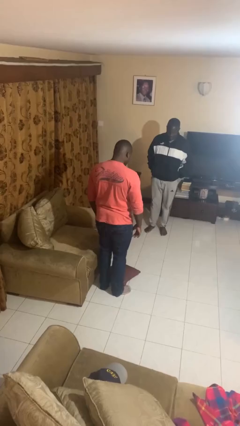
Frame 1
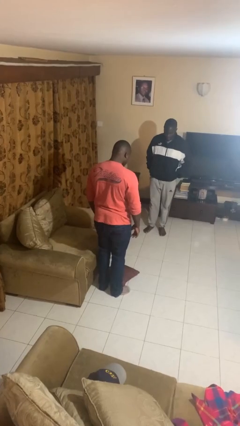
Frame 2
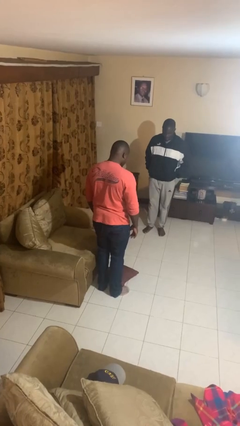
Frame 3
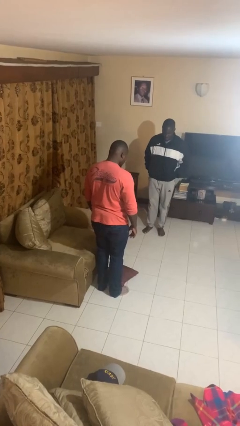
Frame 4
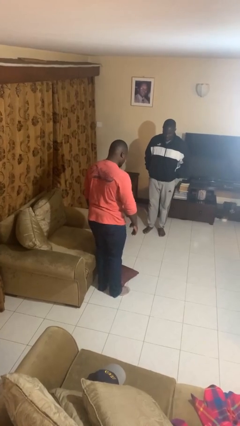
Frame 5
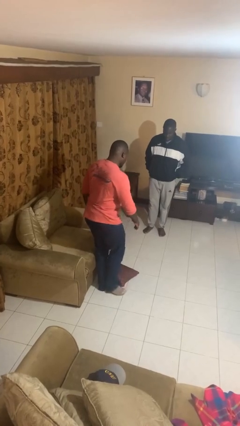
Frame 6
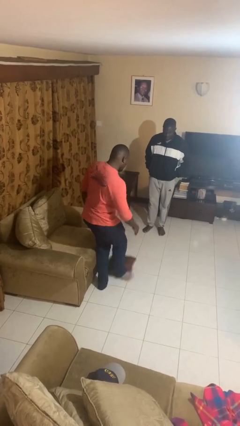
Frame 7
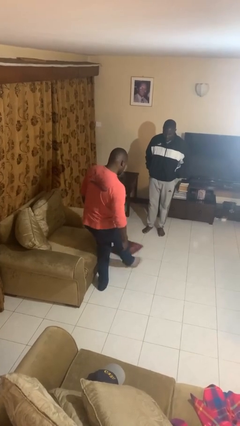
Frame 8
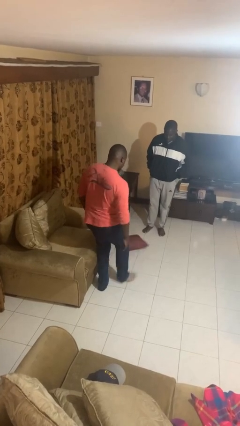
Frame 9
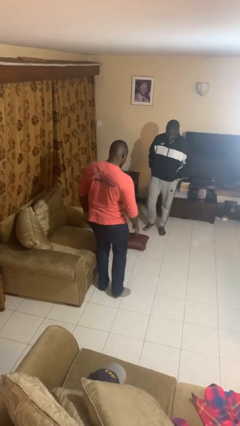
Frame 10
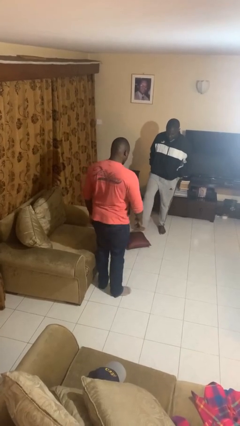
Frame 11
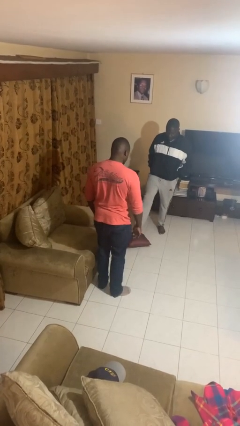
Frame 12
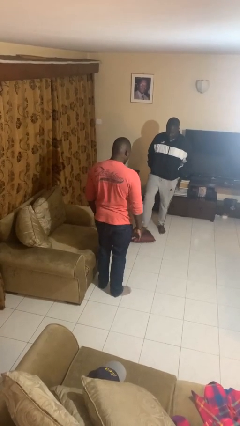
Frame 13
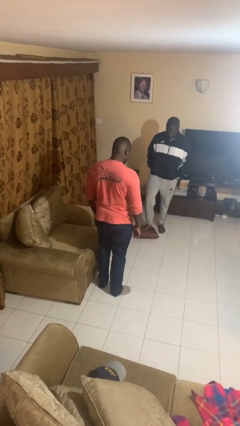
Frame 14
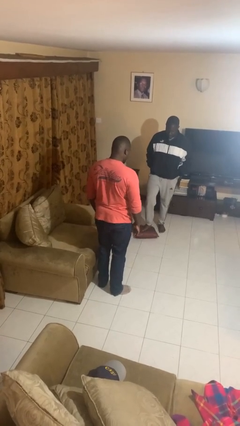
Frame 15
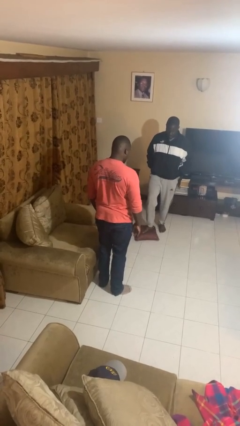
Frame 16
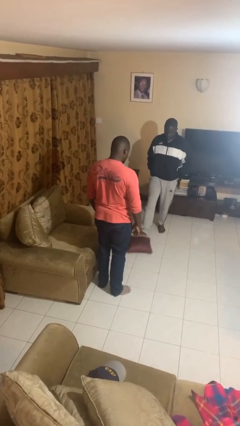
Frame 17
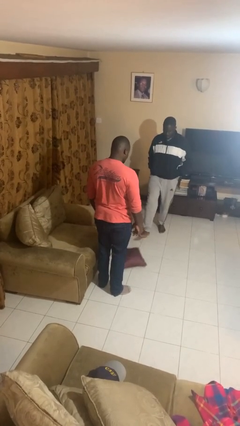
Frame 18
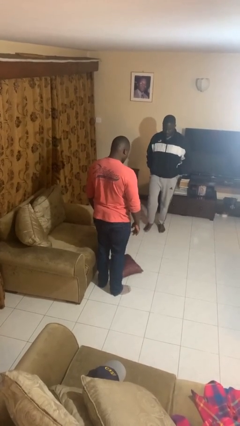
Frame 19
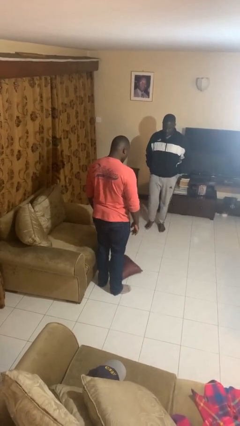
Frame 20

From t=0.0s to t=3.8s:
person kicks object to person

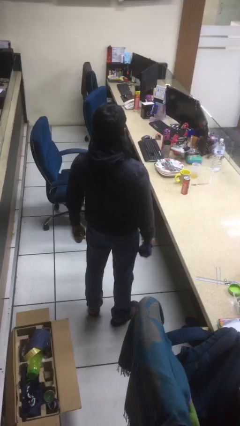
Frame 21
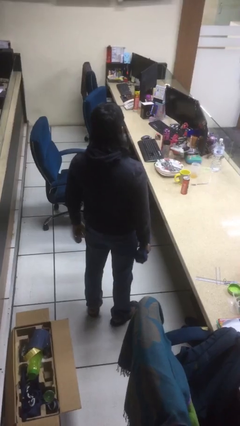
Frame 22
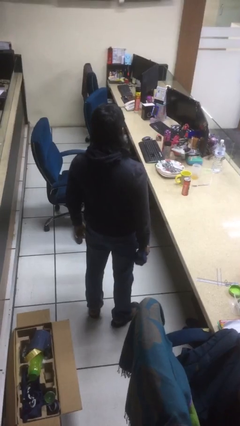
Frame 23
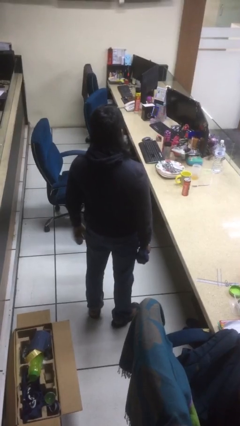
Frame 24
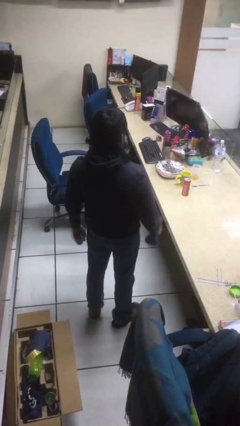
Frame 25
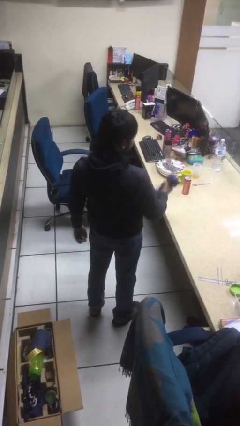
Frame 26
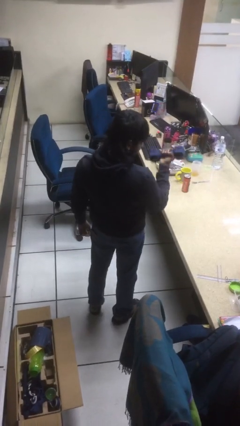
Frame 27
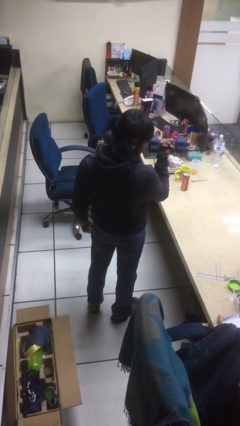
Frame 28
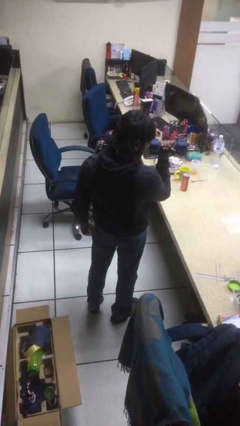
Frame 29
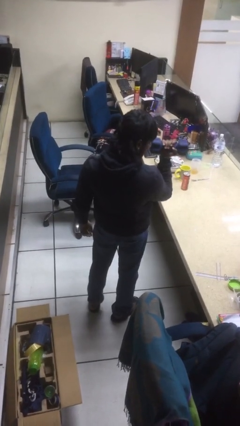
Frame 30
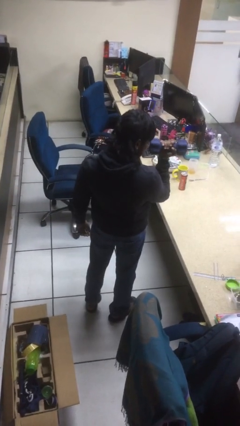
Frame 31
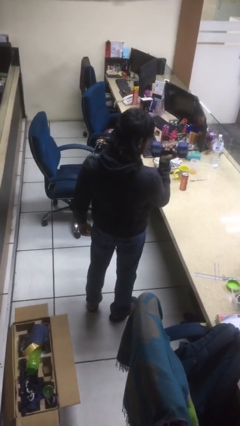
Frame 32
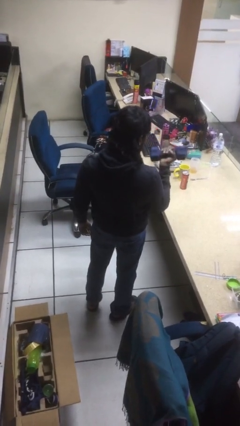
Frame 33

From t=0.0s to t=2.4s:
person lifts dumbbells

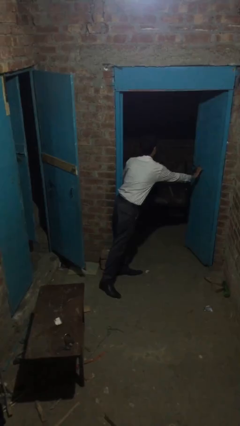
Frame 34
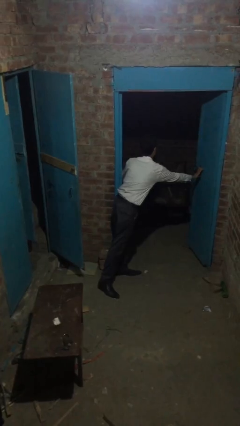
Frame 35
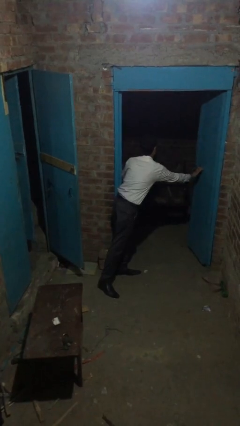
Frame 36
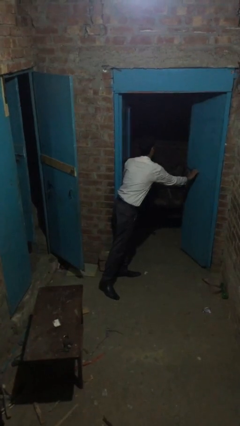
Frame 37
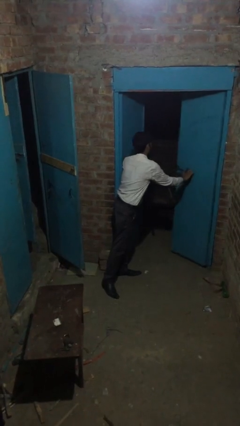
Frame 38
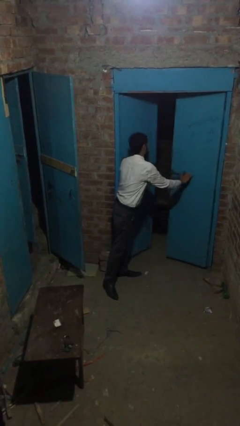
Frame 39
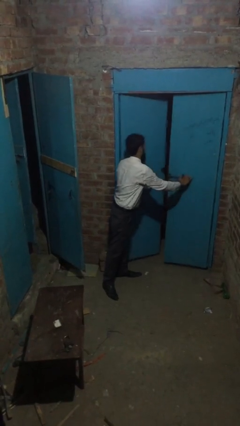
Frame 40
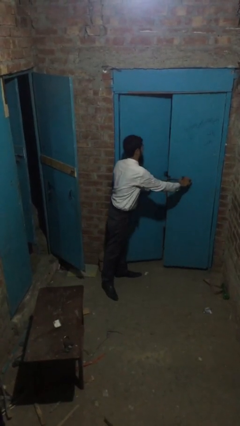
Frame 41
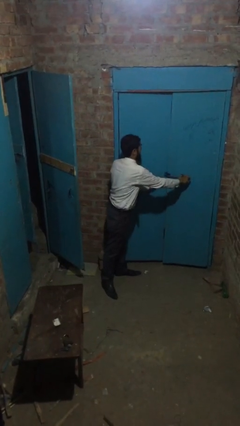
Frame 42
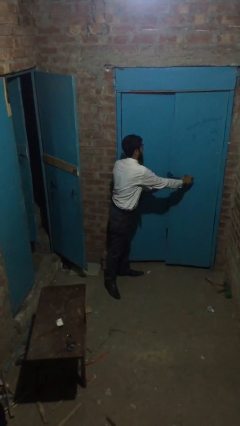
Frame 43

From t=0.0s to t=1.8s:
person closes facility door

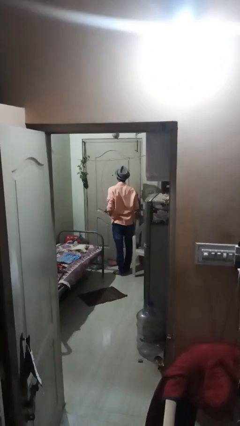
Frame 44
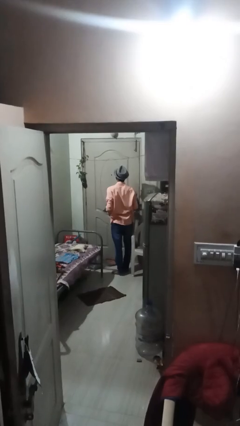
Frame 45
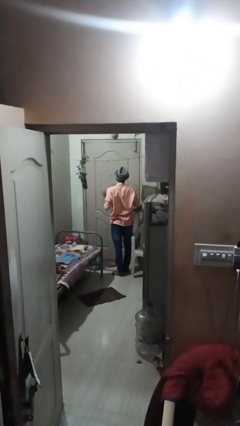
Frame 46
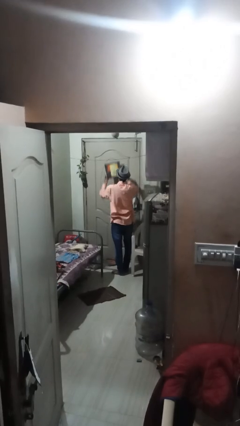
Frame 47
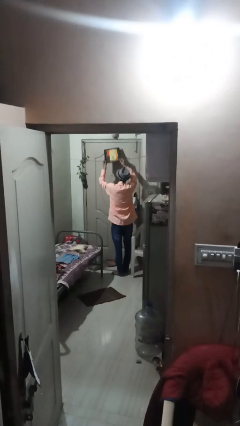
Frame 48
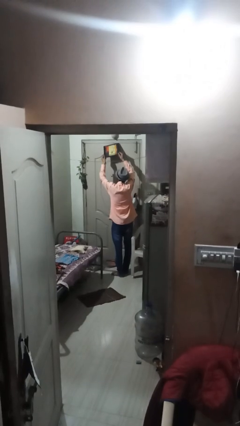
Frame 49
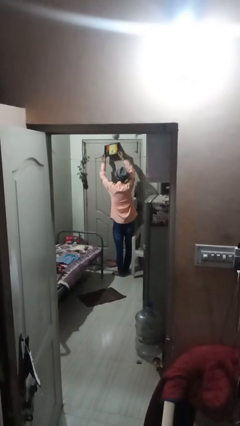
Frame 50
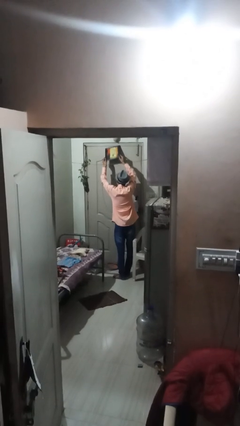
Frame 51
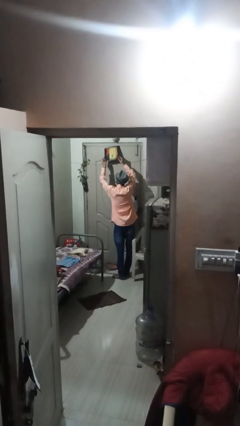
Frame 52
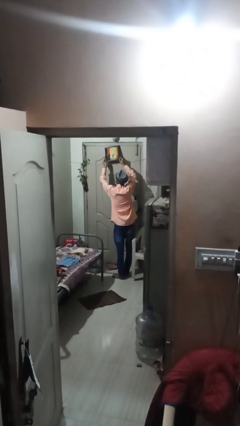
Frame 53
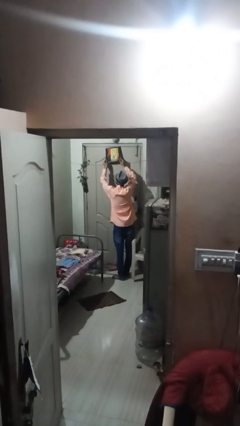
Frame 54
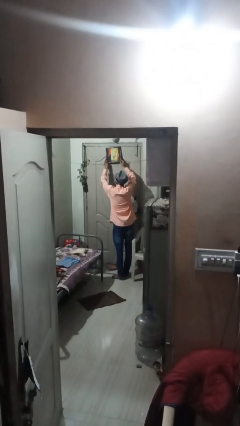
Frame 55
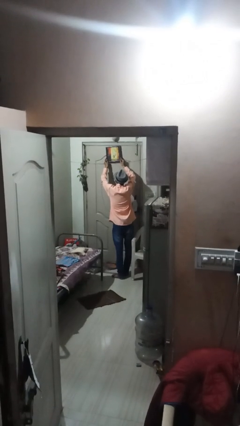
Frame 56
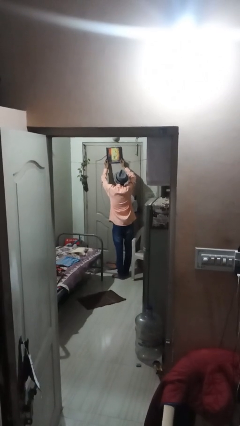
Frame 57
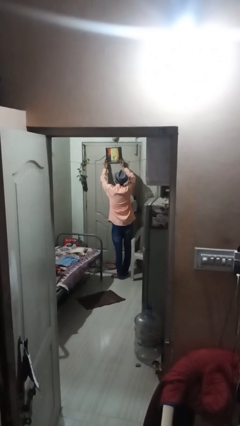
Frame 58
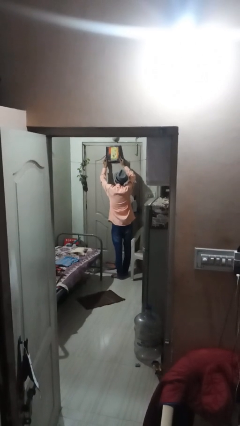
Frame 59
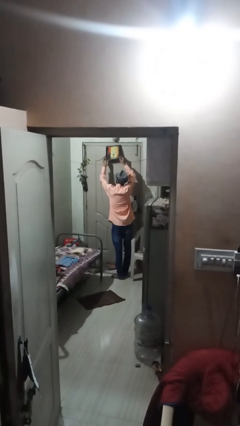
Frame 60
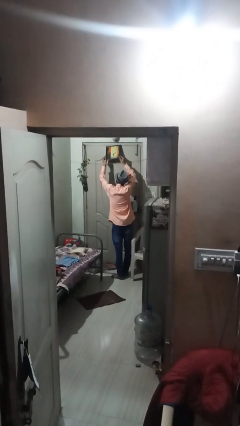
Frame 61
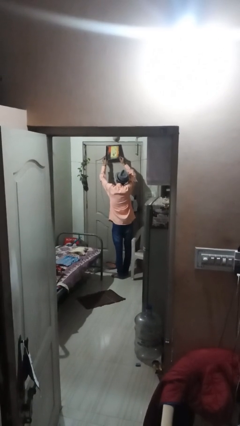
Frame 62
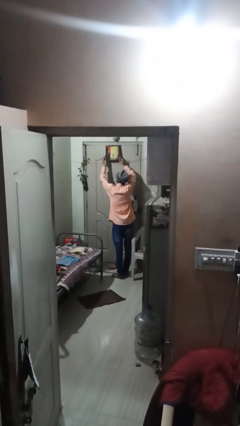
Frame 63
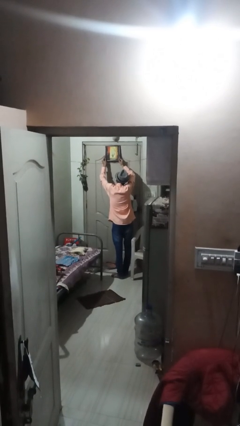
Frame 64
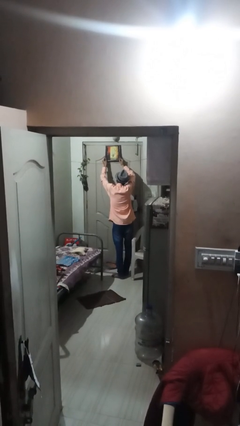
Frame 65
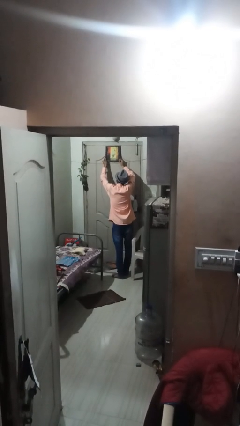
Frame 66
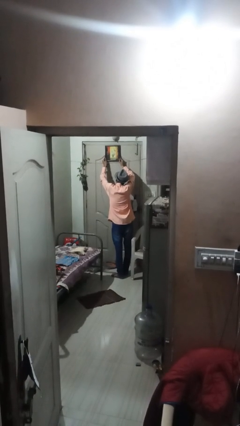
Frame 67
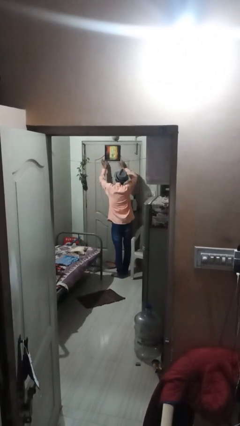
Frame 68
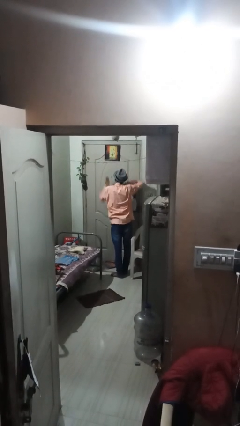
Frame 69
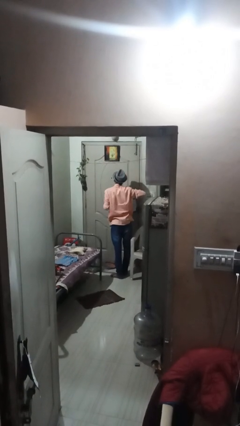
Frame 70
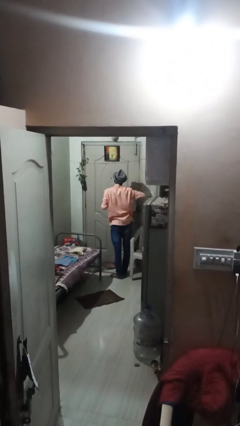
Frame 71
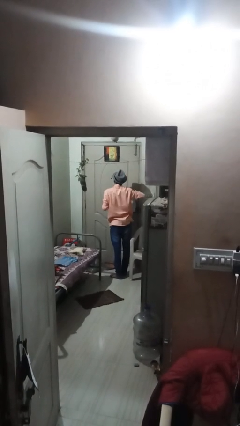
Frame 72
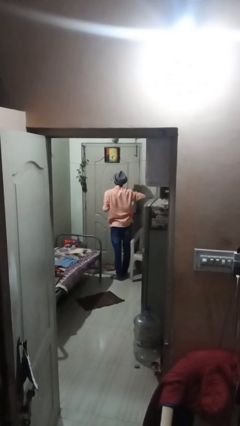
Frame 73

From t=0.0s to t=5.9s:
person puts up picture frame

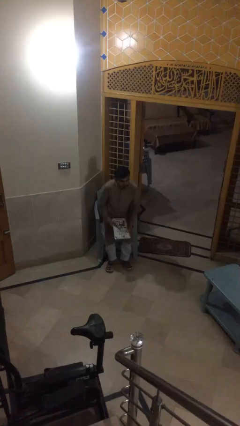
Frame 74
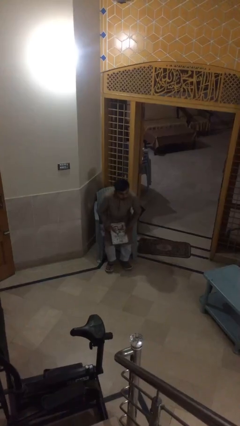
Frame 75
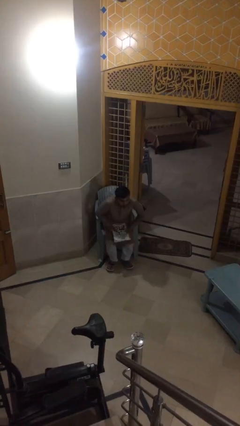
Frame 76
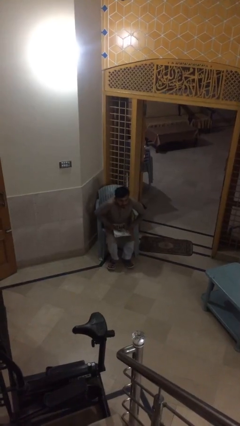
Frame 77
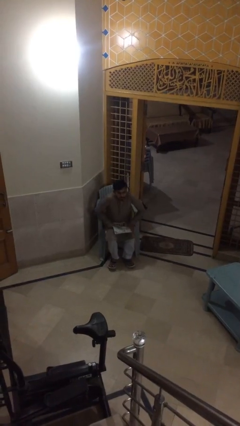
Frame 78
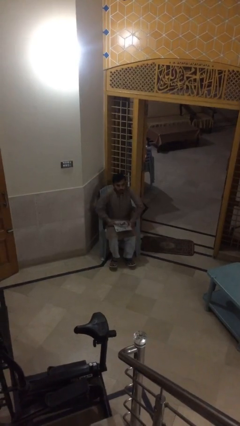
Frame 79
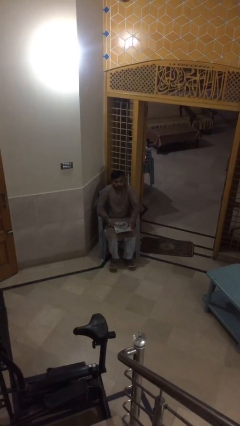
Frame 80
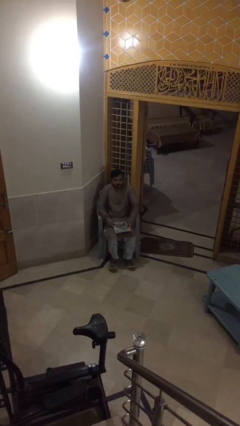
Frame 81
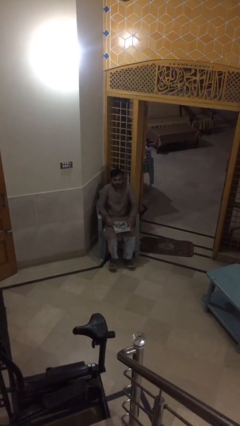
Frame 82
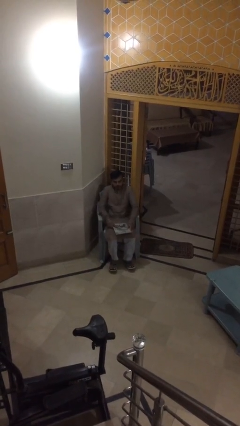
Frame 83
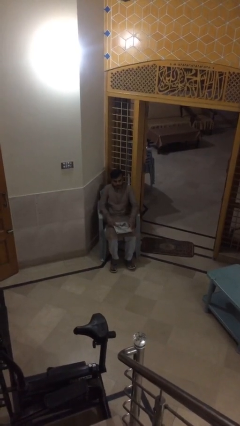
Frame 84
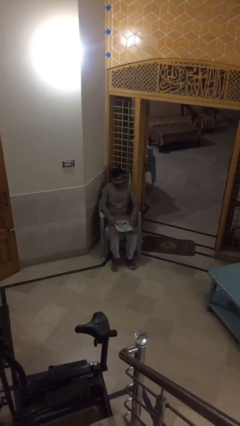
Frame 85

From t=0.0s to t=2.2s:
person sits down

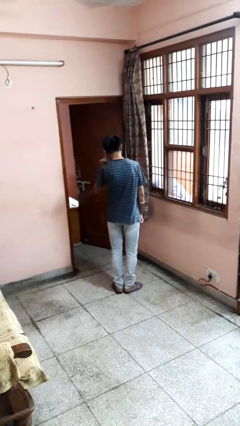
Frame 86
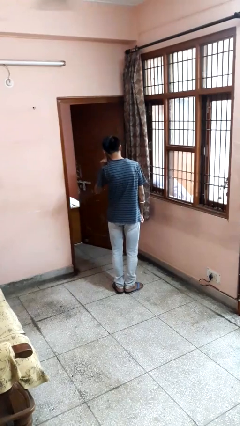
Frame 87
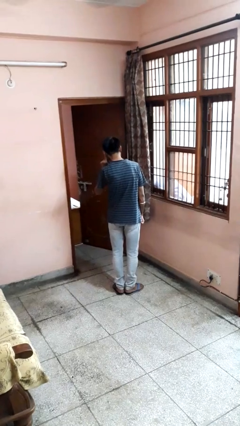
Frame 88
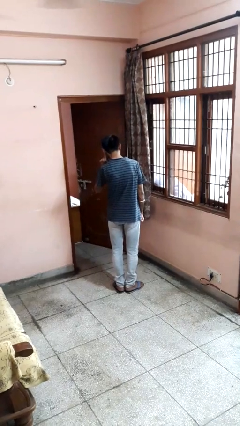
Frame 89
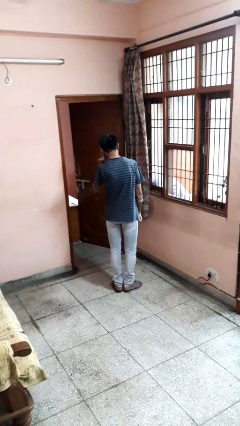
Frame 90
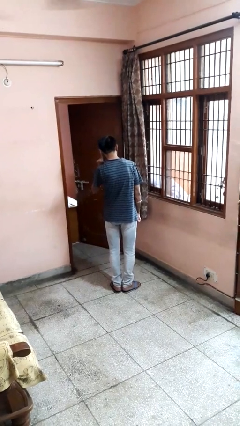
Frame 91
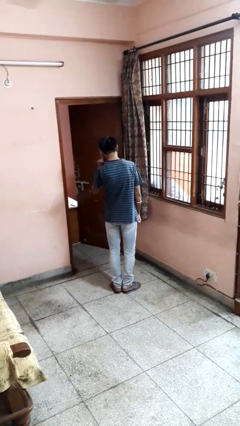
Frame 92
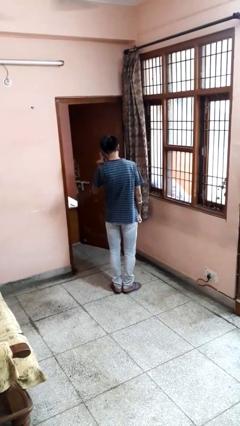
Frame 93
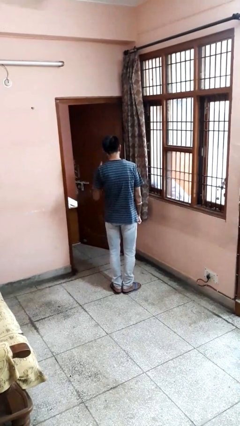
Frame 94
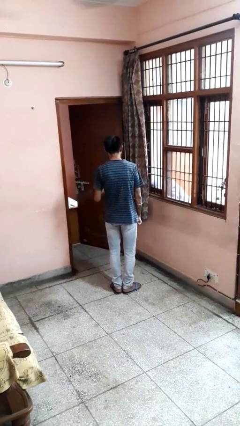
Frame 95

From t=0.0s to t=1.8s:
person gestures listen closely
